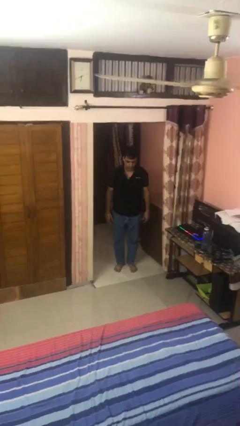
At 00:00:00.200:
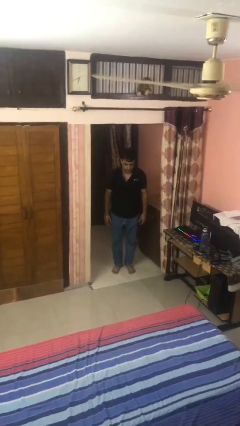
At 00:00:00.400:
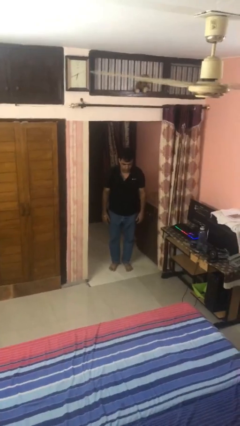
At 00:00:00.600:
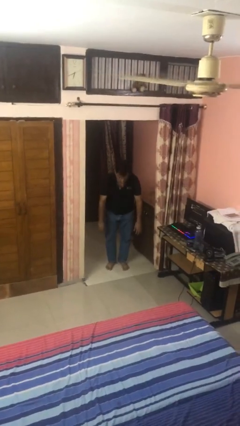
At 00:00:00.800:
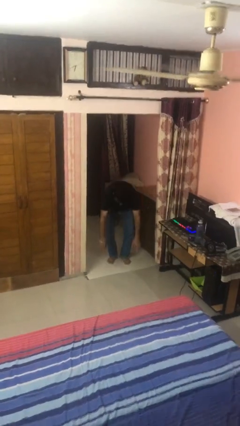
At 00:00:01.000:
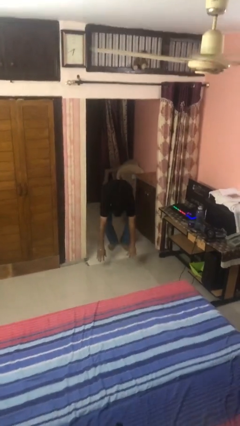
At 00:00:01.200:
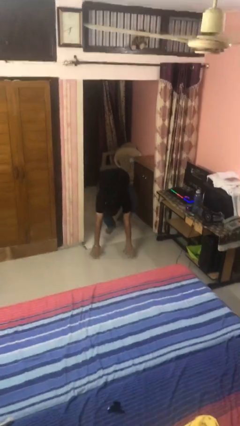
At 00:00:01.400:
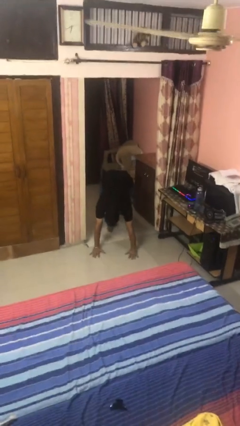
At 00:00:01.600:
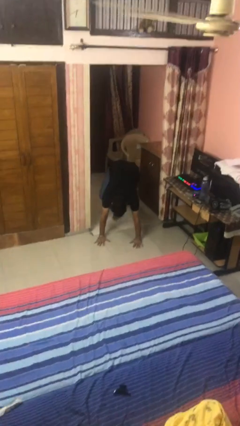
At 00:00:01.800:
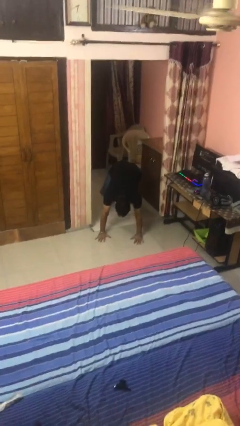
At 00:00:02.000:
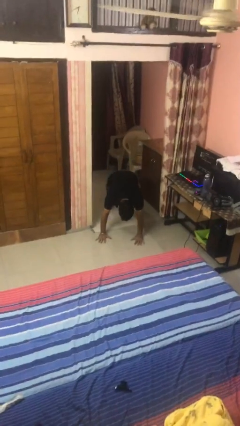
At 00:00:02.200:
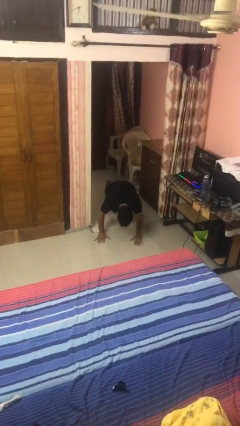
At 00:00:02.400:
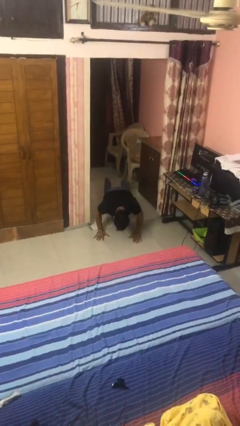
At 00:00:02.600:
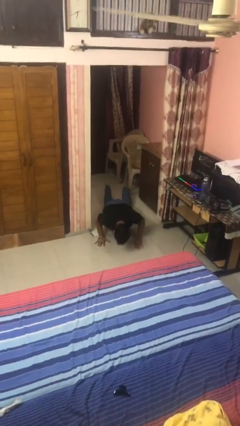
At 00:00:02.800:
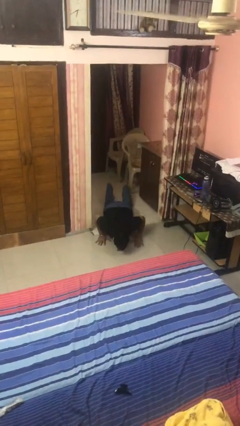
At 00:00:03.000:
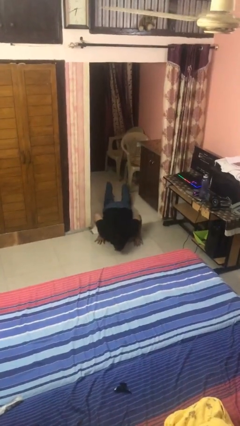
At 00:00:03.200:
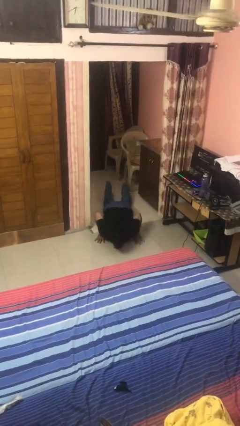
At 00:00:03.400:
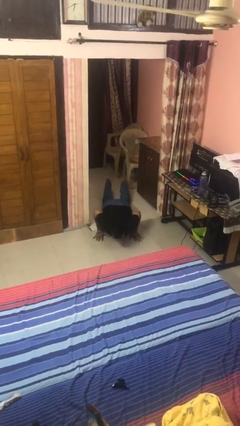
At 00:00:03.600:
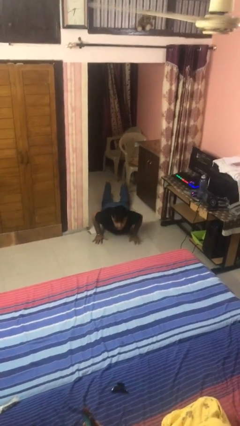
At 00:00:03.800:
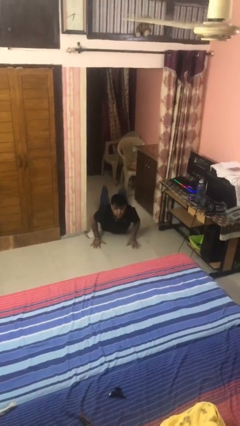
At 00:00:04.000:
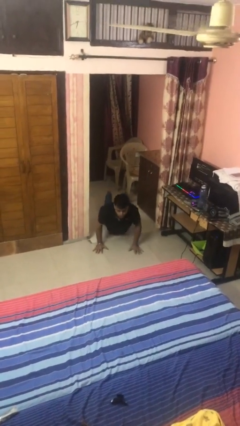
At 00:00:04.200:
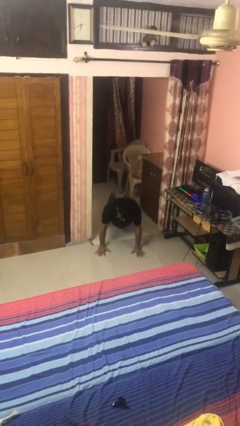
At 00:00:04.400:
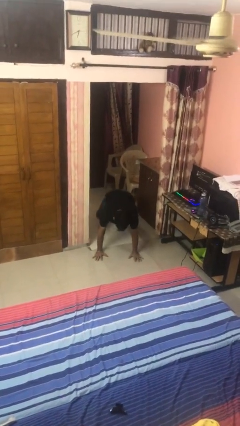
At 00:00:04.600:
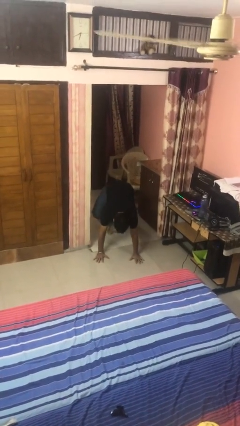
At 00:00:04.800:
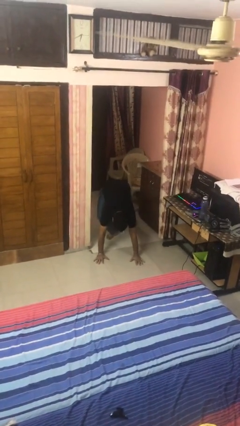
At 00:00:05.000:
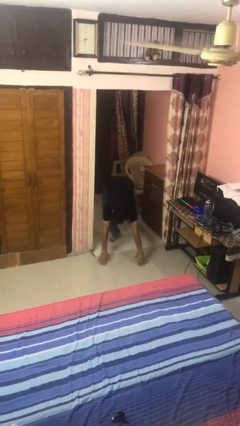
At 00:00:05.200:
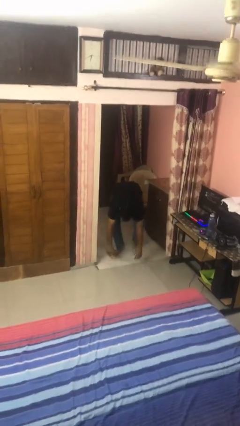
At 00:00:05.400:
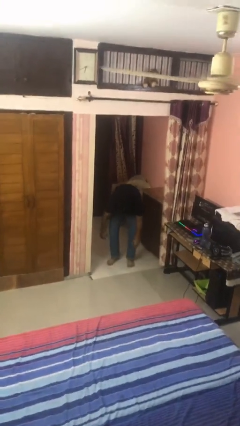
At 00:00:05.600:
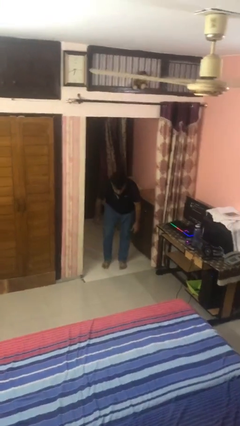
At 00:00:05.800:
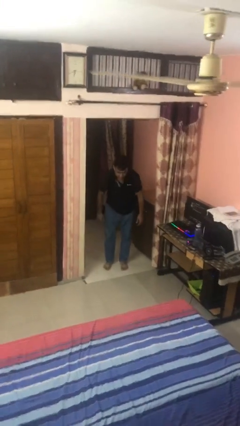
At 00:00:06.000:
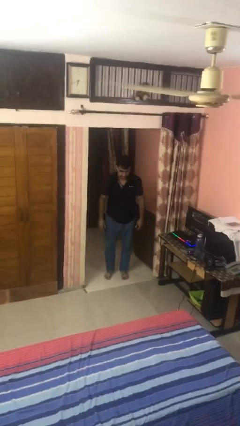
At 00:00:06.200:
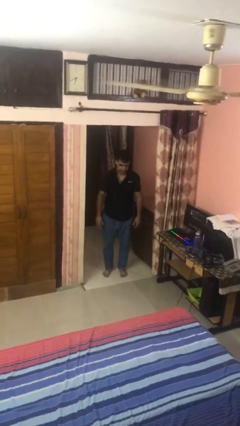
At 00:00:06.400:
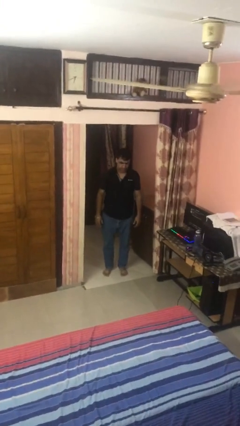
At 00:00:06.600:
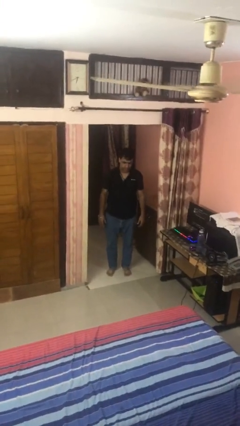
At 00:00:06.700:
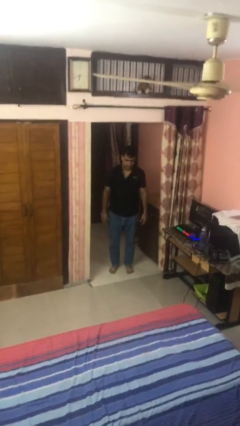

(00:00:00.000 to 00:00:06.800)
person exercises with pushup

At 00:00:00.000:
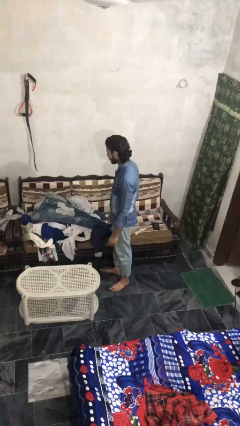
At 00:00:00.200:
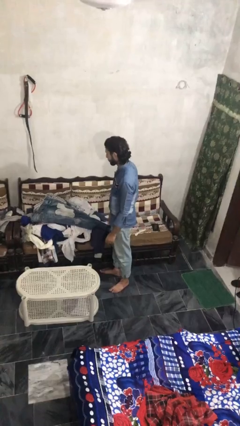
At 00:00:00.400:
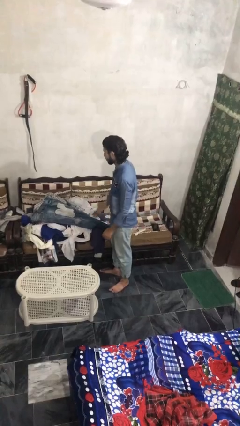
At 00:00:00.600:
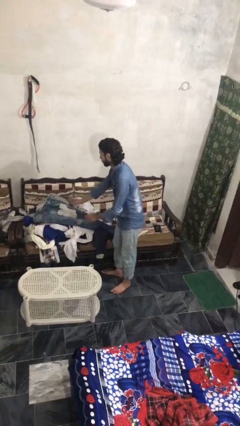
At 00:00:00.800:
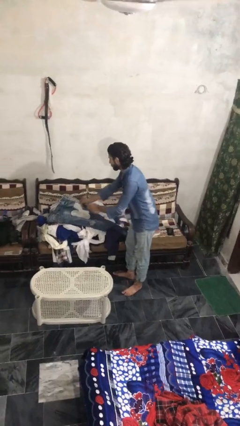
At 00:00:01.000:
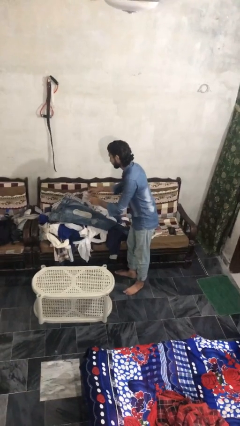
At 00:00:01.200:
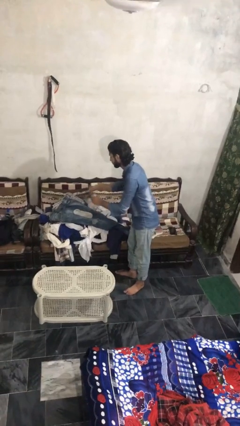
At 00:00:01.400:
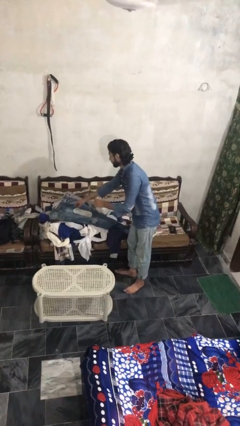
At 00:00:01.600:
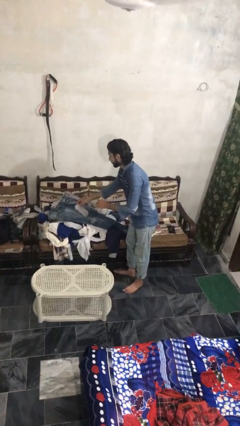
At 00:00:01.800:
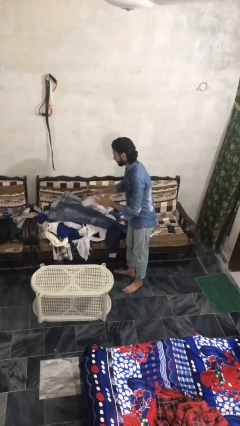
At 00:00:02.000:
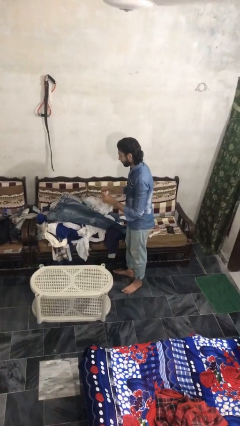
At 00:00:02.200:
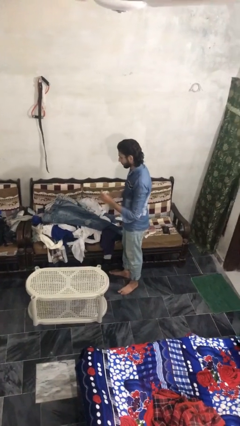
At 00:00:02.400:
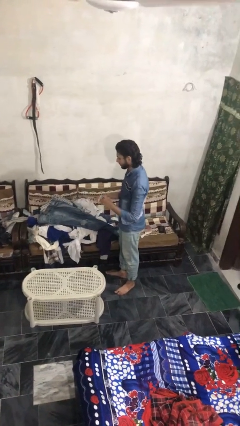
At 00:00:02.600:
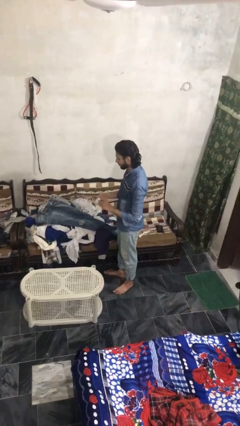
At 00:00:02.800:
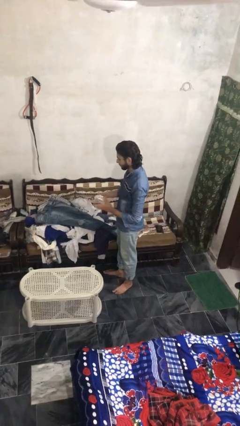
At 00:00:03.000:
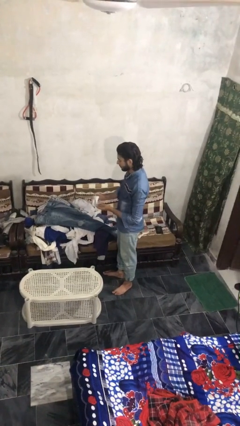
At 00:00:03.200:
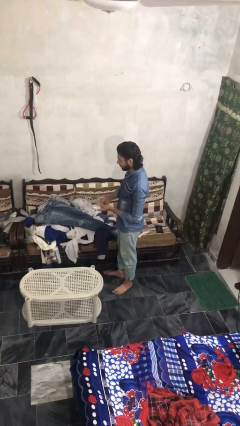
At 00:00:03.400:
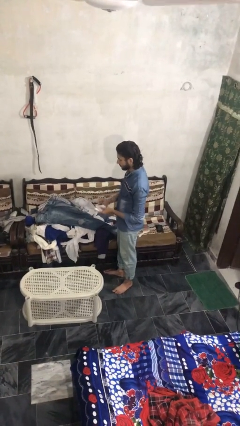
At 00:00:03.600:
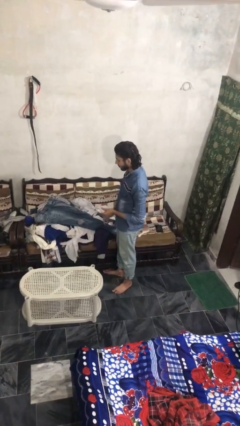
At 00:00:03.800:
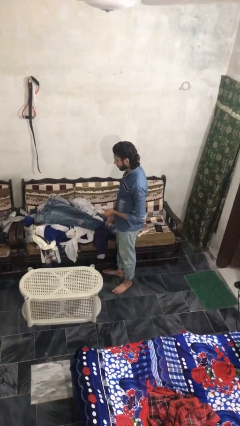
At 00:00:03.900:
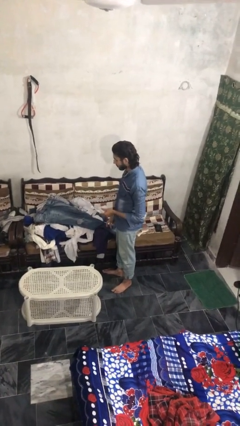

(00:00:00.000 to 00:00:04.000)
person folds socks

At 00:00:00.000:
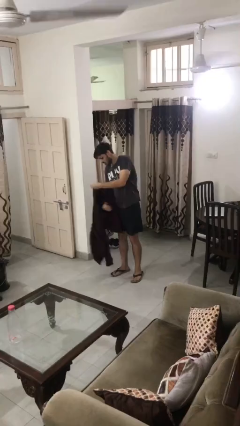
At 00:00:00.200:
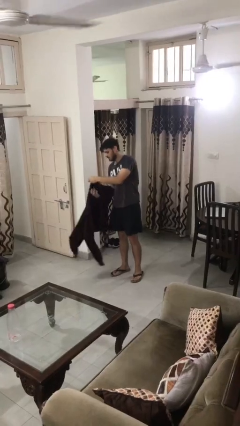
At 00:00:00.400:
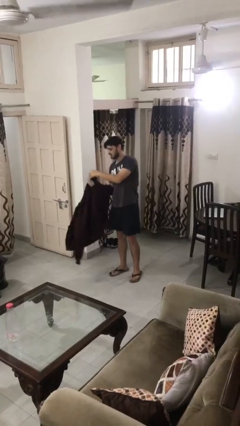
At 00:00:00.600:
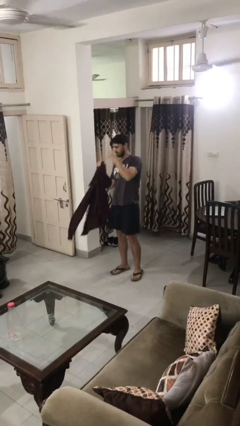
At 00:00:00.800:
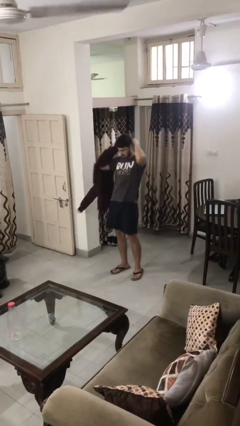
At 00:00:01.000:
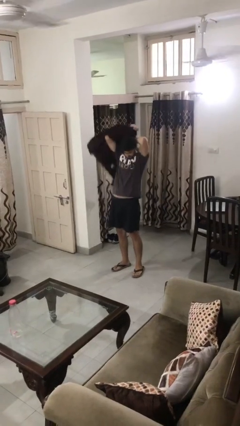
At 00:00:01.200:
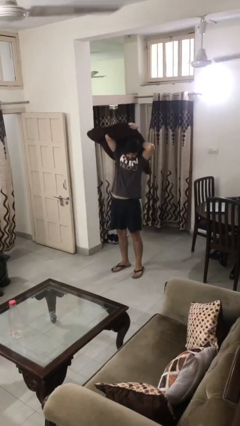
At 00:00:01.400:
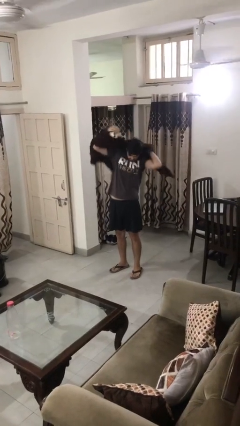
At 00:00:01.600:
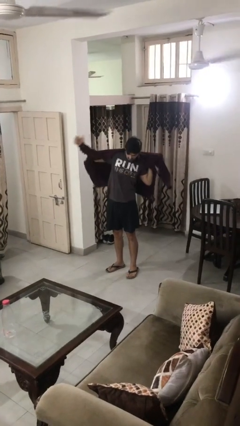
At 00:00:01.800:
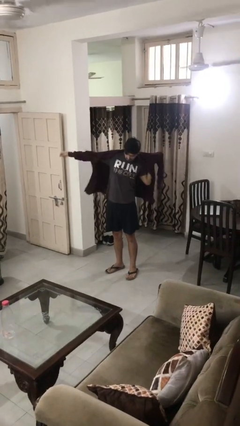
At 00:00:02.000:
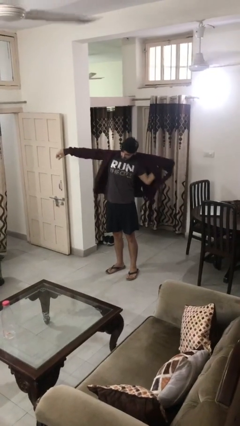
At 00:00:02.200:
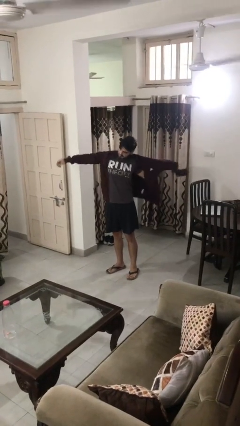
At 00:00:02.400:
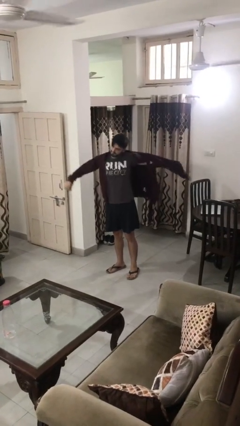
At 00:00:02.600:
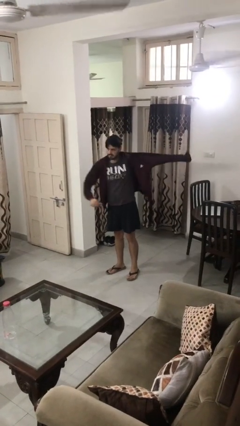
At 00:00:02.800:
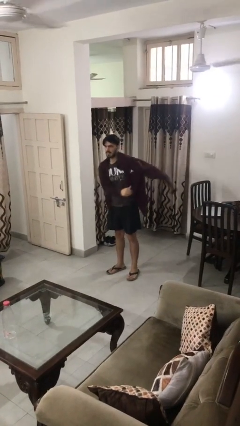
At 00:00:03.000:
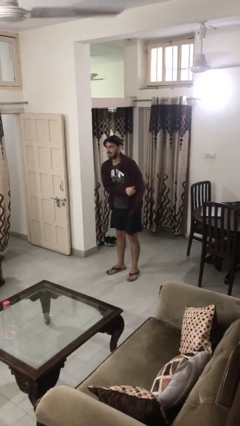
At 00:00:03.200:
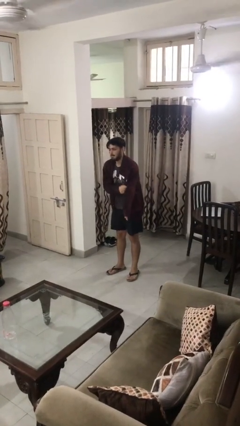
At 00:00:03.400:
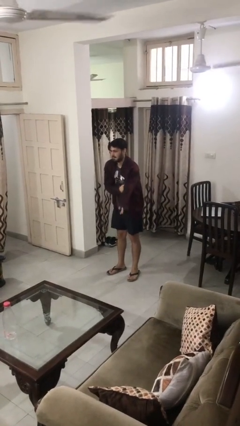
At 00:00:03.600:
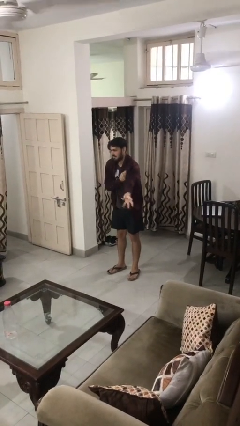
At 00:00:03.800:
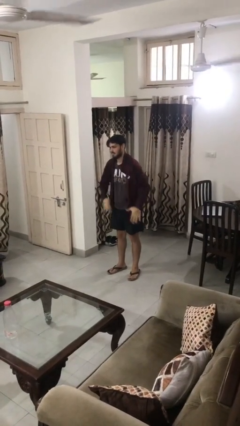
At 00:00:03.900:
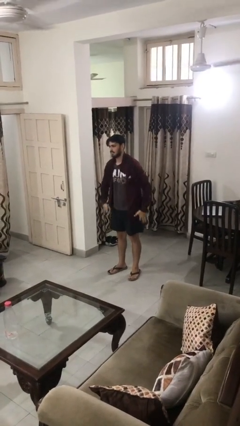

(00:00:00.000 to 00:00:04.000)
person puts on jacket

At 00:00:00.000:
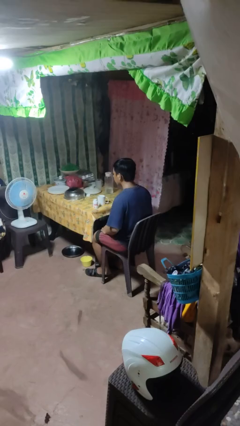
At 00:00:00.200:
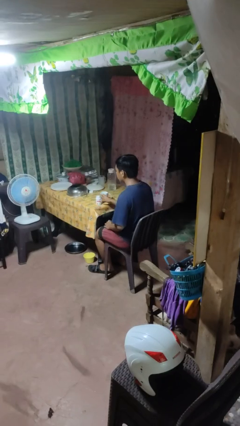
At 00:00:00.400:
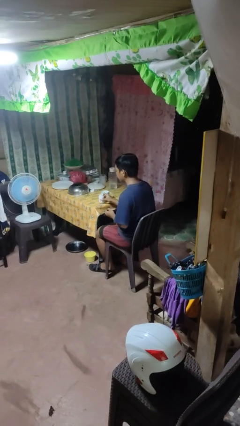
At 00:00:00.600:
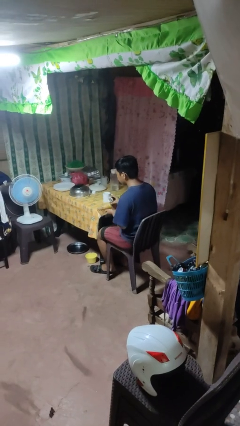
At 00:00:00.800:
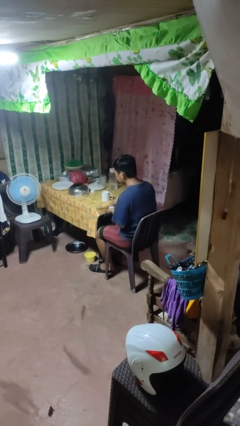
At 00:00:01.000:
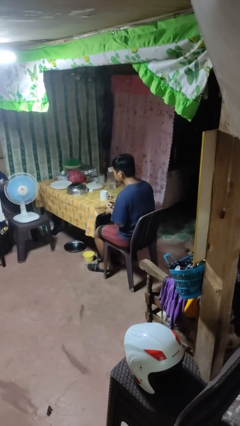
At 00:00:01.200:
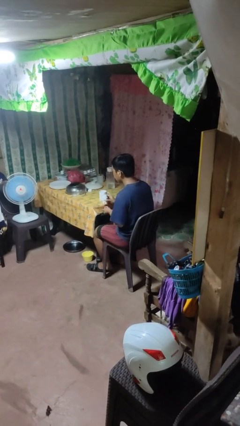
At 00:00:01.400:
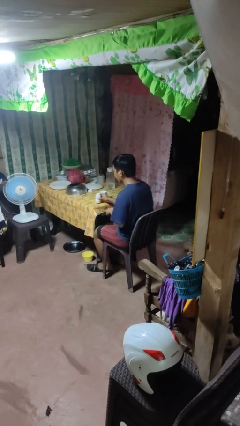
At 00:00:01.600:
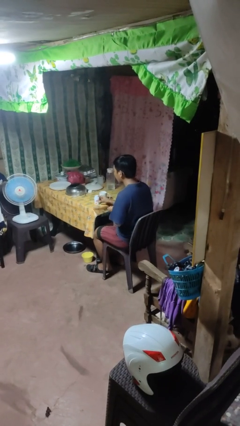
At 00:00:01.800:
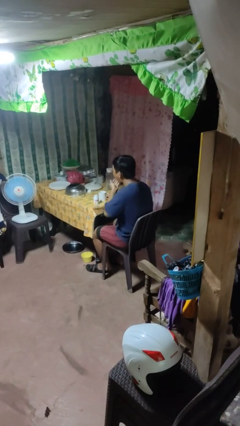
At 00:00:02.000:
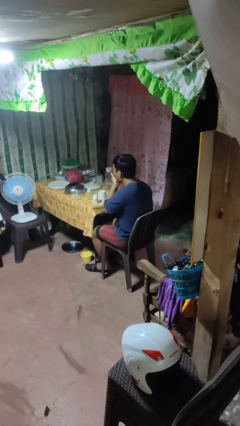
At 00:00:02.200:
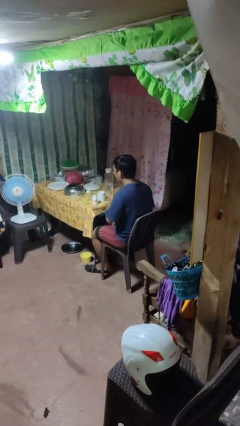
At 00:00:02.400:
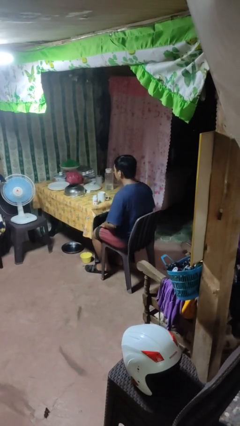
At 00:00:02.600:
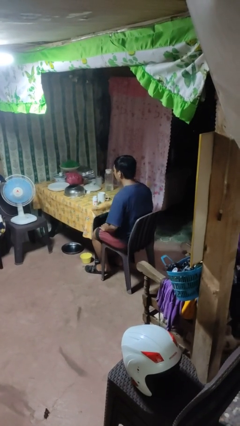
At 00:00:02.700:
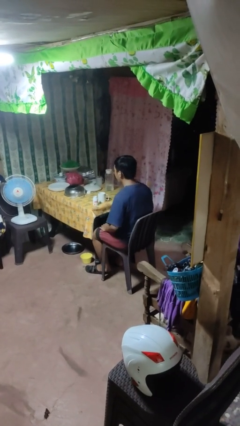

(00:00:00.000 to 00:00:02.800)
person takes medicine pills
